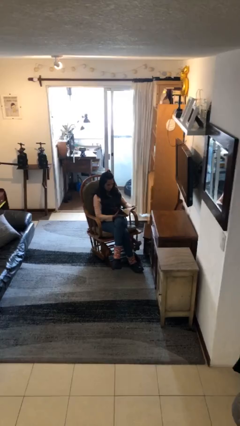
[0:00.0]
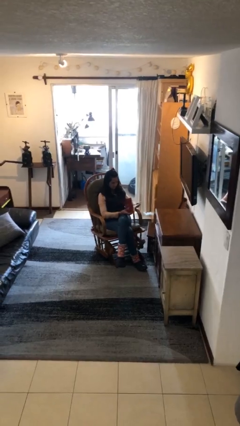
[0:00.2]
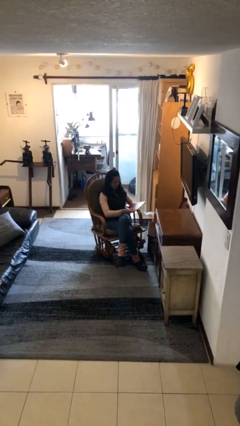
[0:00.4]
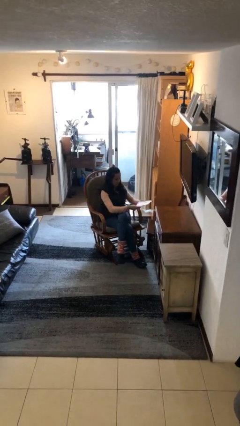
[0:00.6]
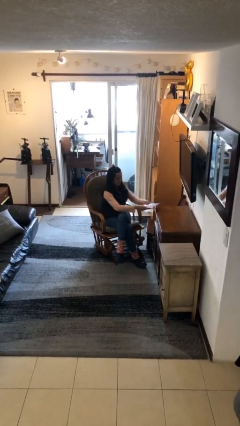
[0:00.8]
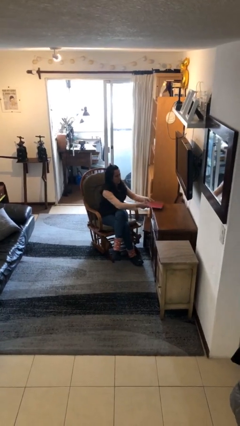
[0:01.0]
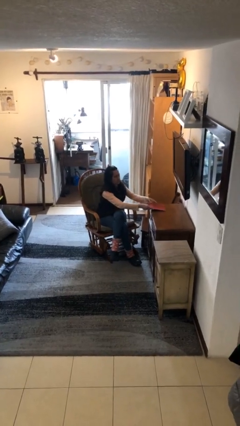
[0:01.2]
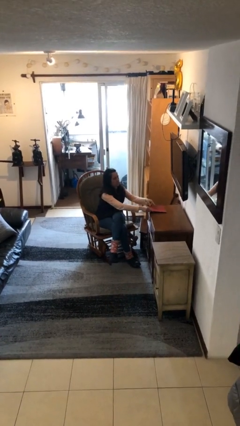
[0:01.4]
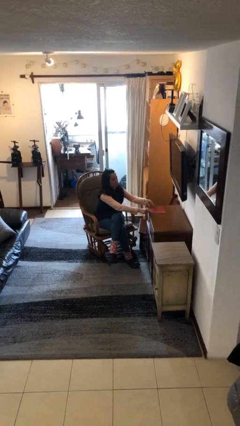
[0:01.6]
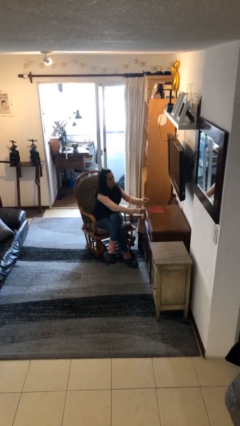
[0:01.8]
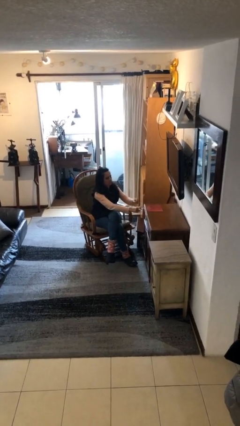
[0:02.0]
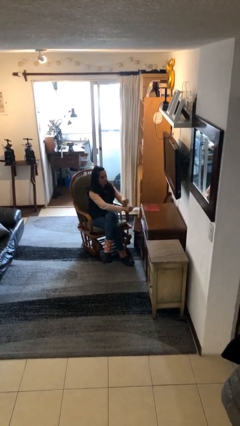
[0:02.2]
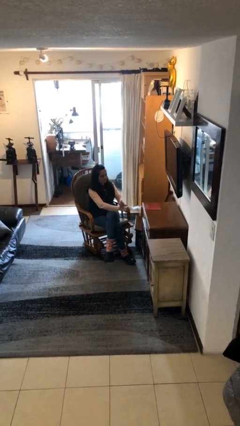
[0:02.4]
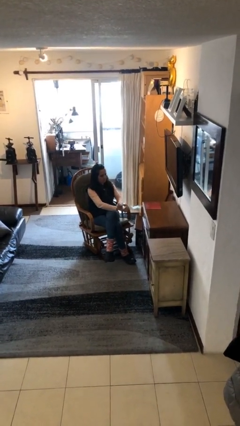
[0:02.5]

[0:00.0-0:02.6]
person puts down object on table

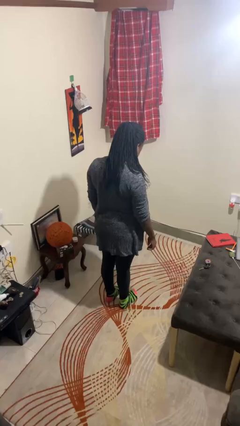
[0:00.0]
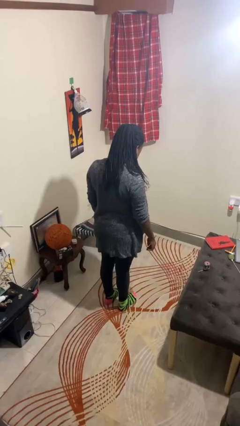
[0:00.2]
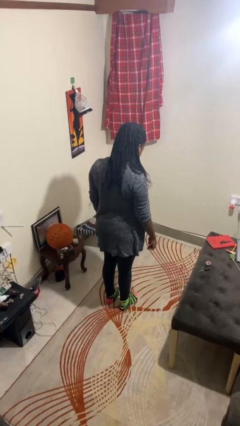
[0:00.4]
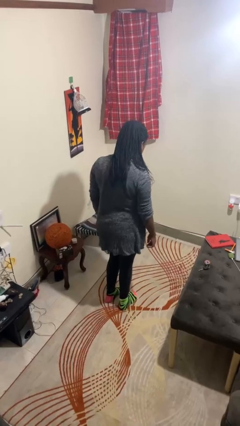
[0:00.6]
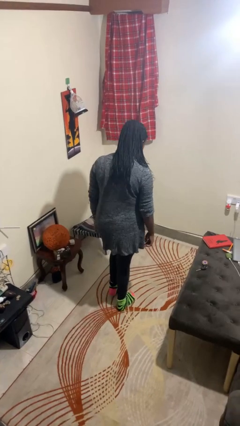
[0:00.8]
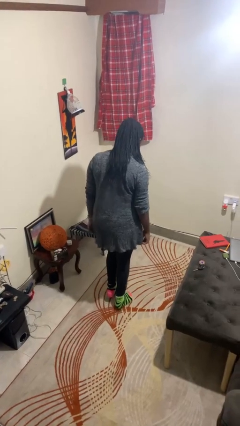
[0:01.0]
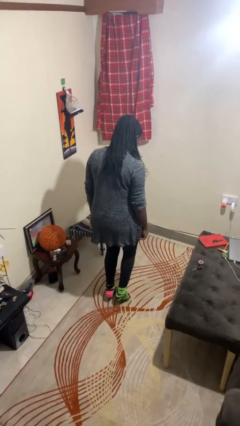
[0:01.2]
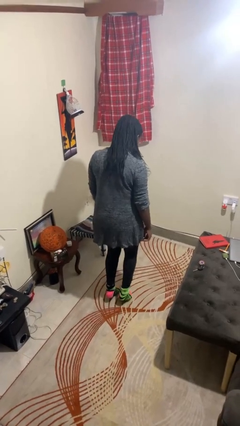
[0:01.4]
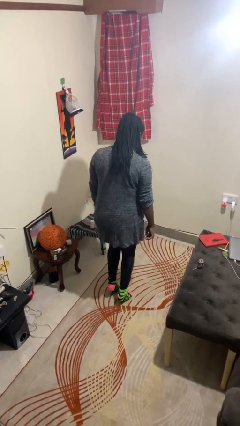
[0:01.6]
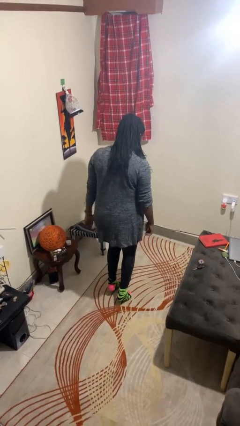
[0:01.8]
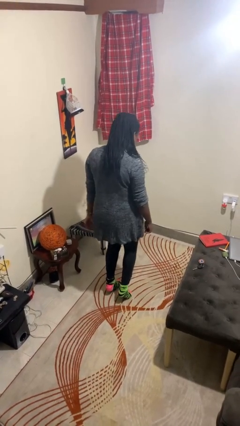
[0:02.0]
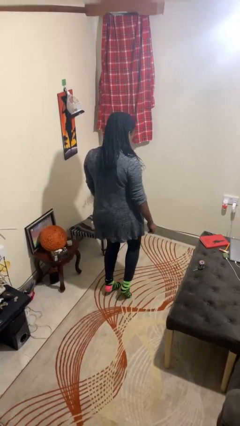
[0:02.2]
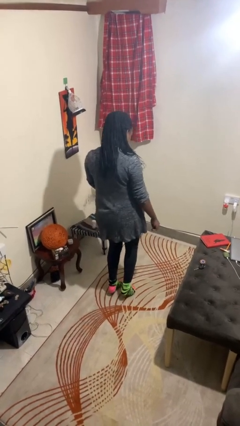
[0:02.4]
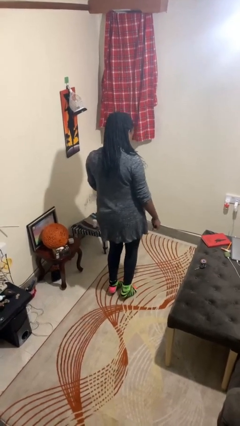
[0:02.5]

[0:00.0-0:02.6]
person walks tiptoe

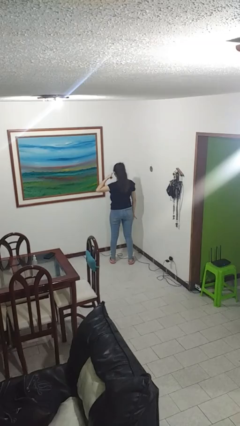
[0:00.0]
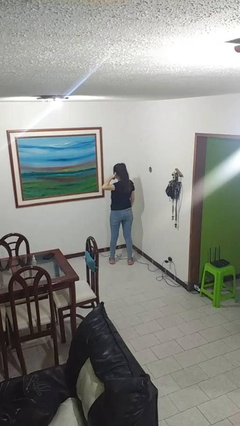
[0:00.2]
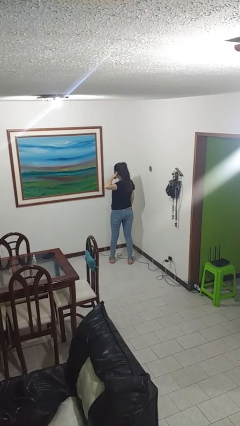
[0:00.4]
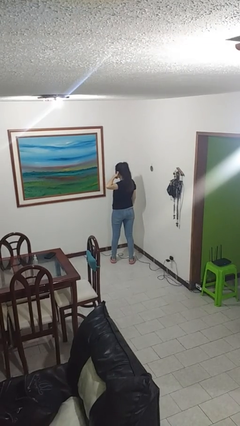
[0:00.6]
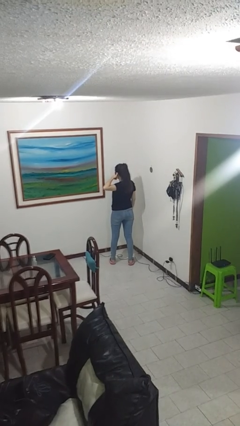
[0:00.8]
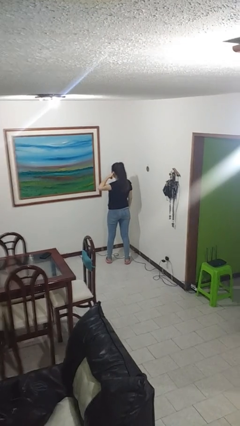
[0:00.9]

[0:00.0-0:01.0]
person gestures call me

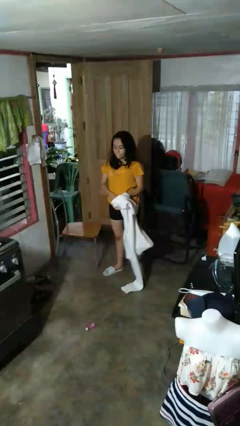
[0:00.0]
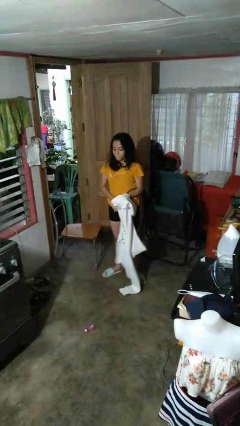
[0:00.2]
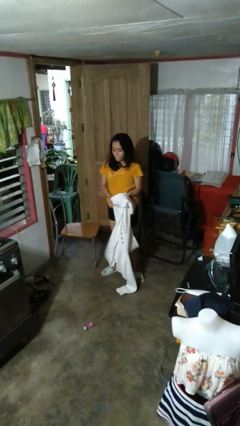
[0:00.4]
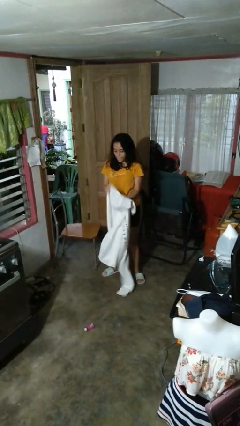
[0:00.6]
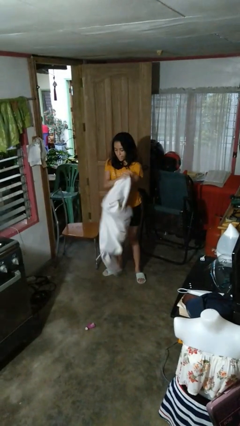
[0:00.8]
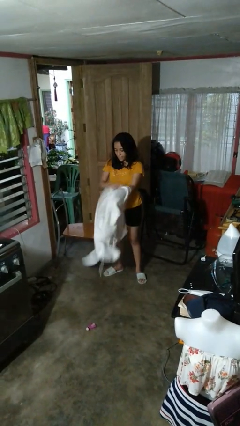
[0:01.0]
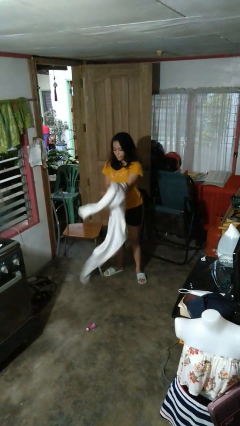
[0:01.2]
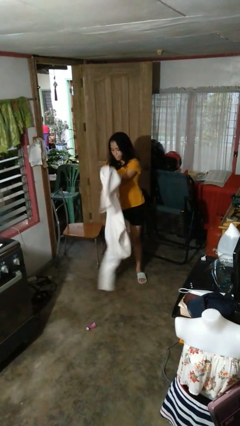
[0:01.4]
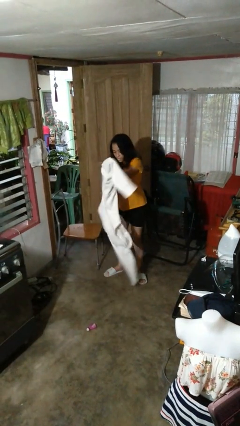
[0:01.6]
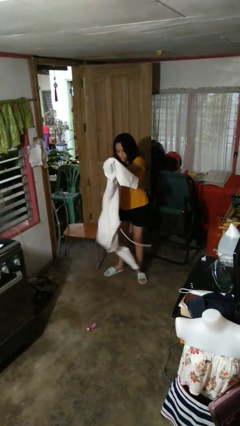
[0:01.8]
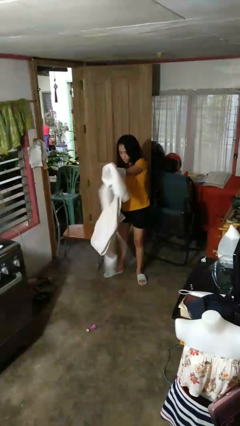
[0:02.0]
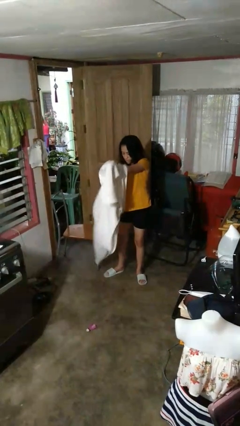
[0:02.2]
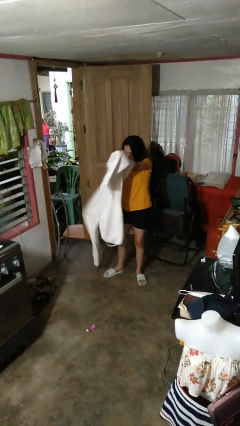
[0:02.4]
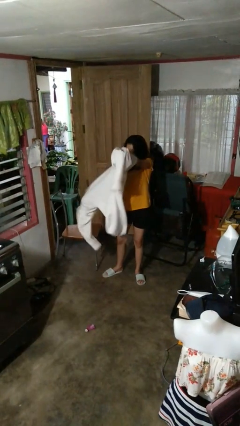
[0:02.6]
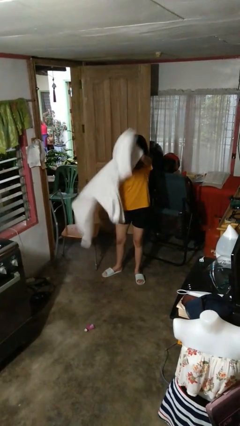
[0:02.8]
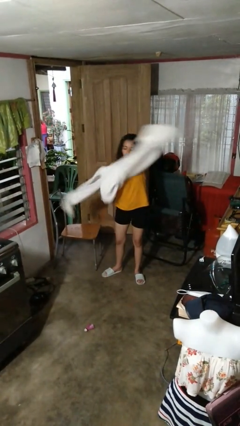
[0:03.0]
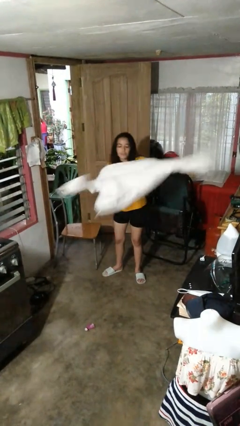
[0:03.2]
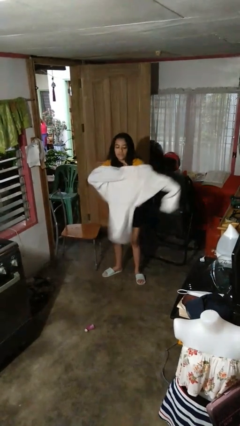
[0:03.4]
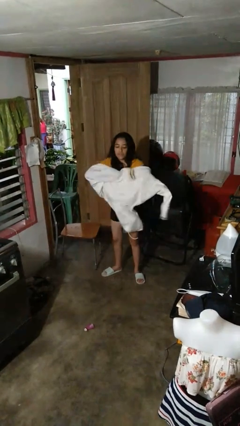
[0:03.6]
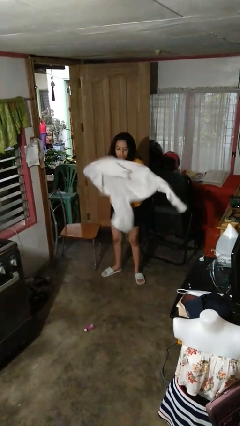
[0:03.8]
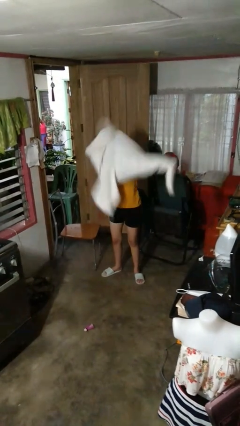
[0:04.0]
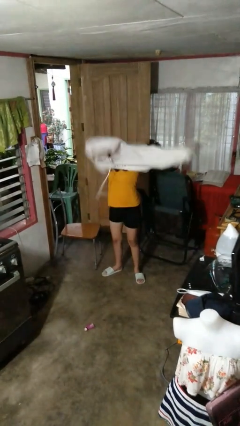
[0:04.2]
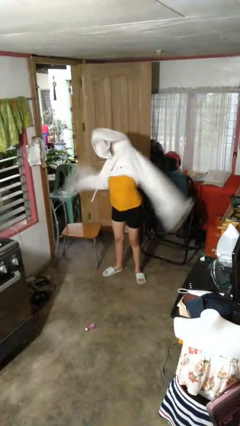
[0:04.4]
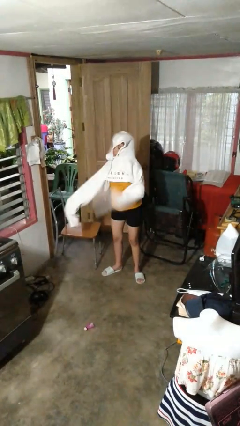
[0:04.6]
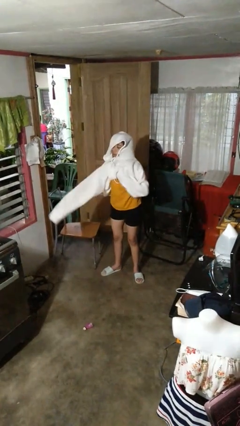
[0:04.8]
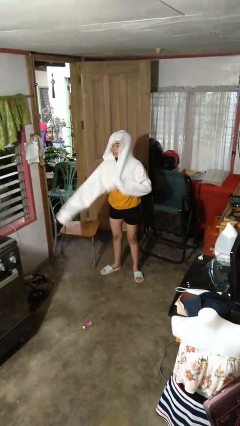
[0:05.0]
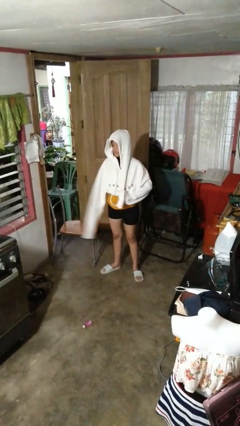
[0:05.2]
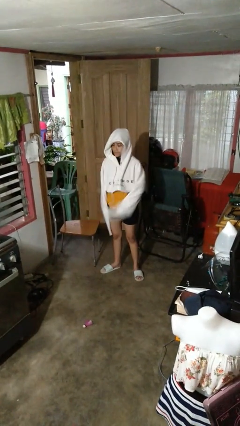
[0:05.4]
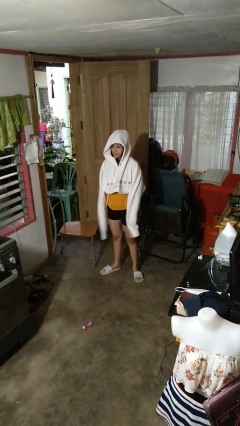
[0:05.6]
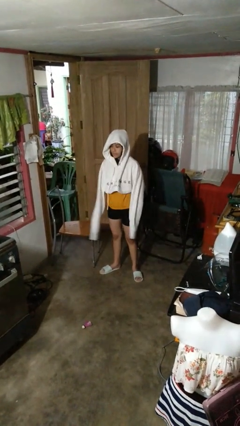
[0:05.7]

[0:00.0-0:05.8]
person puts on hoodie

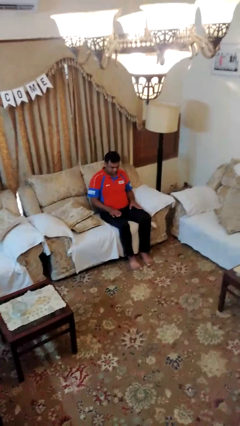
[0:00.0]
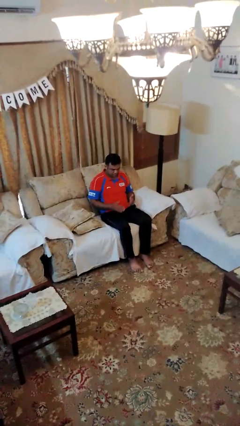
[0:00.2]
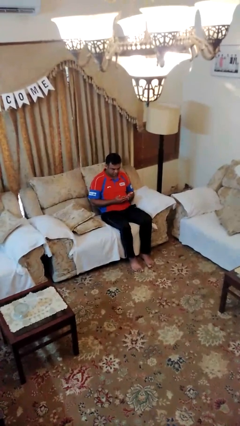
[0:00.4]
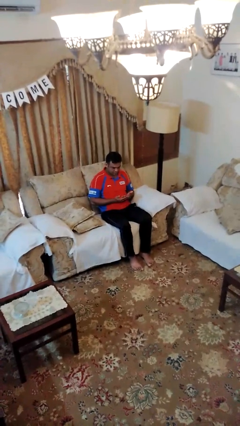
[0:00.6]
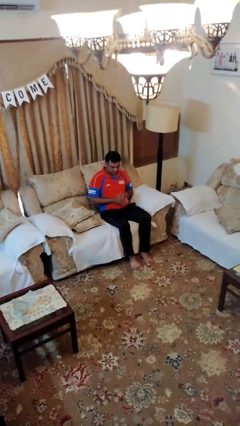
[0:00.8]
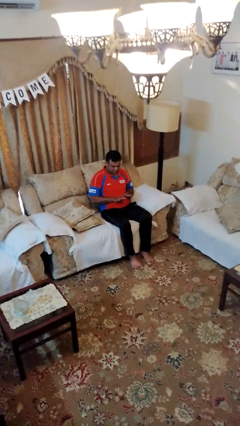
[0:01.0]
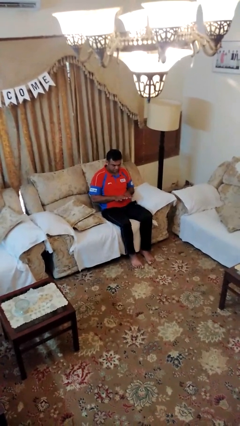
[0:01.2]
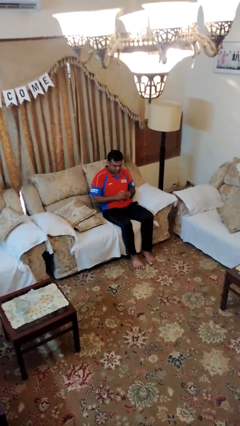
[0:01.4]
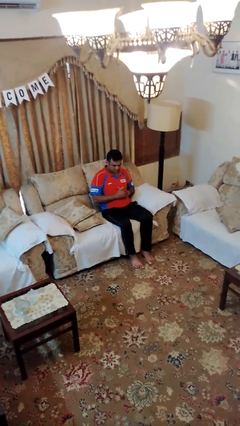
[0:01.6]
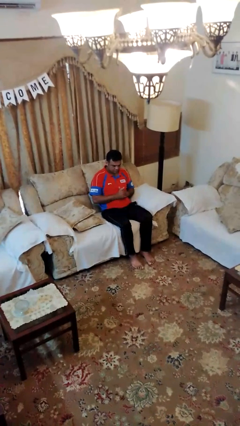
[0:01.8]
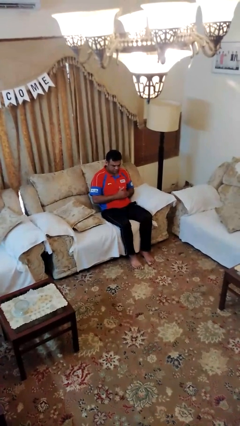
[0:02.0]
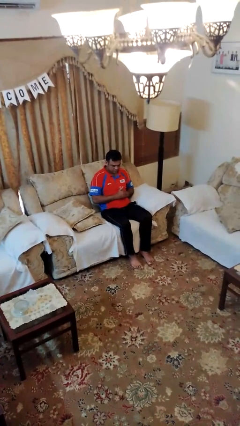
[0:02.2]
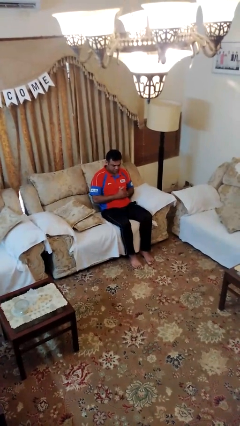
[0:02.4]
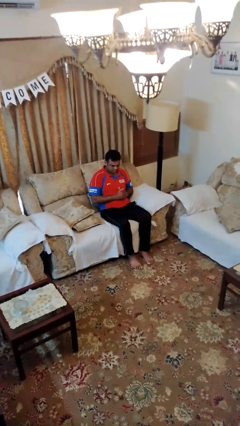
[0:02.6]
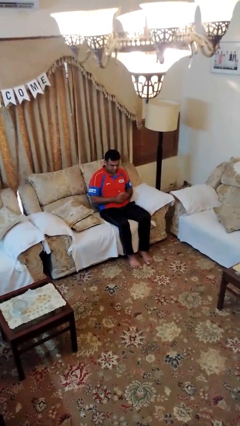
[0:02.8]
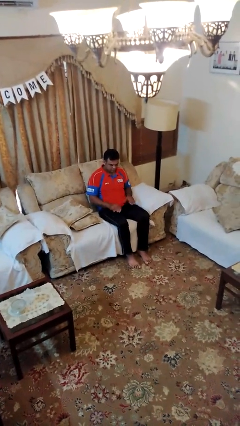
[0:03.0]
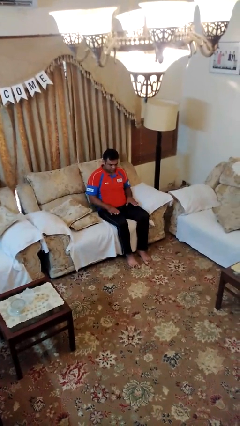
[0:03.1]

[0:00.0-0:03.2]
person looks at hands in lap

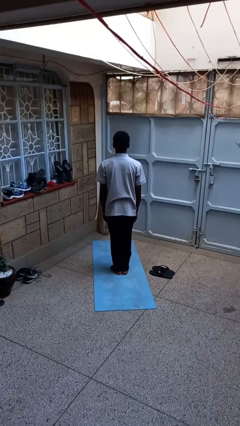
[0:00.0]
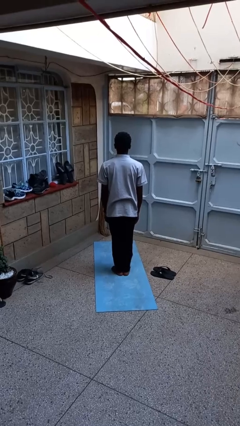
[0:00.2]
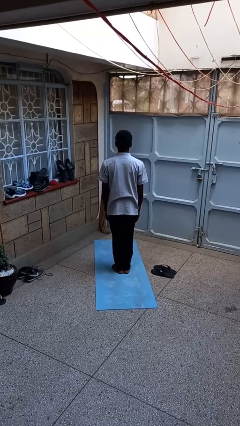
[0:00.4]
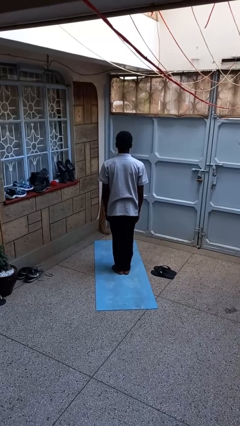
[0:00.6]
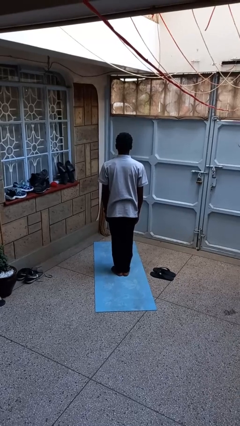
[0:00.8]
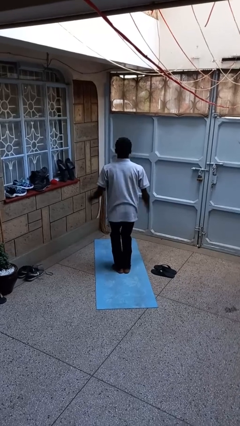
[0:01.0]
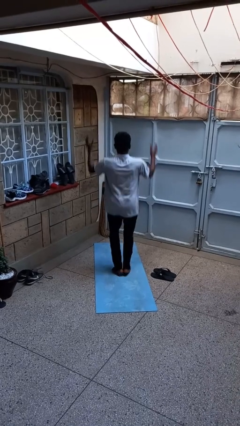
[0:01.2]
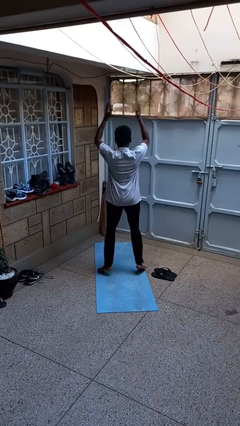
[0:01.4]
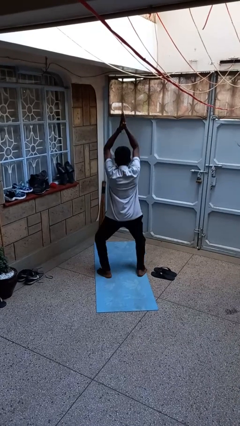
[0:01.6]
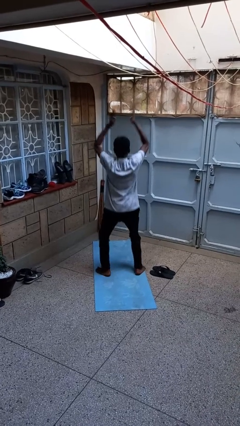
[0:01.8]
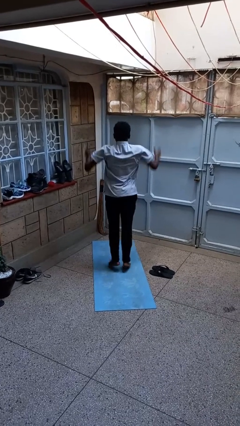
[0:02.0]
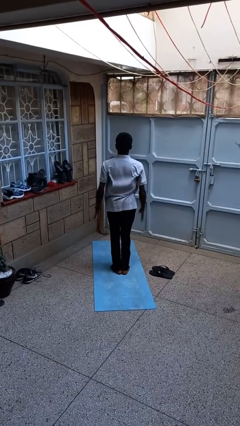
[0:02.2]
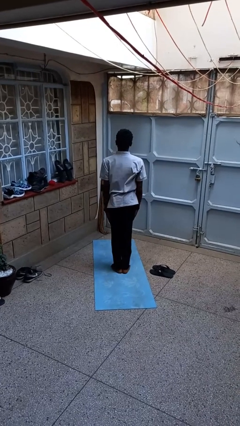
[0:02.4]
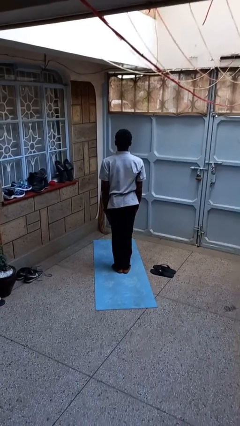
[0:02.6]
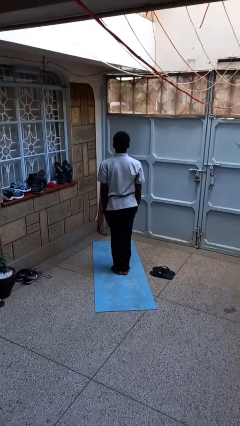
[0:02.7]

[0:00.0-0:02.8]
person exercises with jumping jacks
